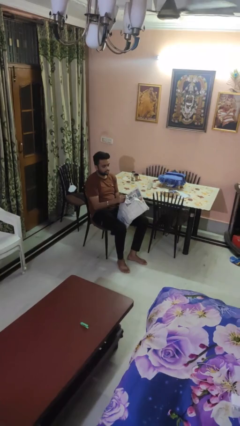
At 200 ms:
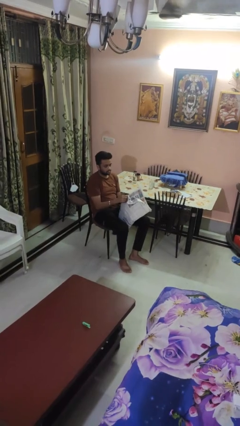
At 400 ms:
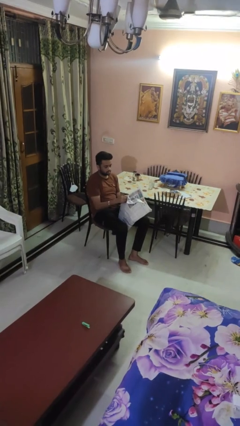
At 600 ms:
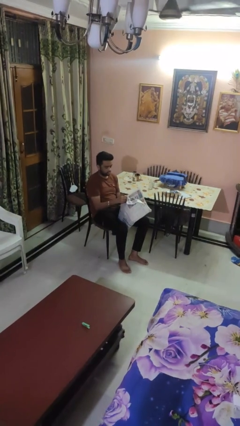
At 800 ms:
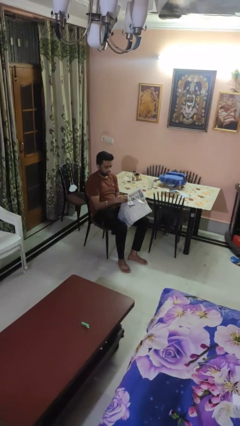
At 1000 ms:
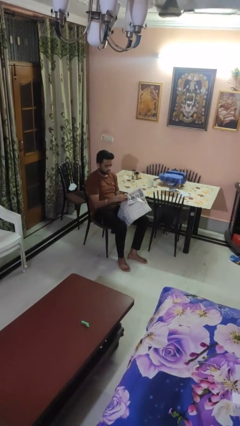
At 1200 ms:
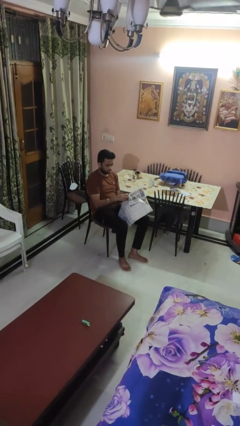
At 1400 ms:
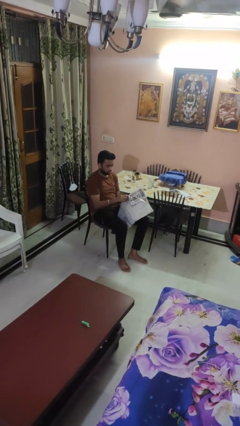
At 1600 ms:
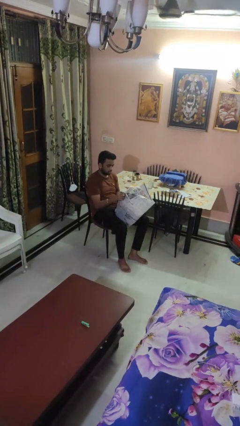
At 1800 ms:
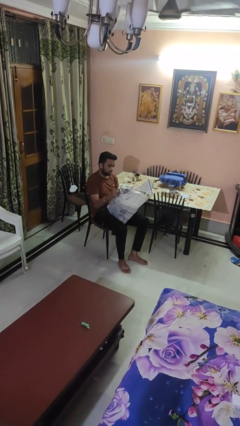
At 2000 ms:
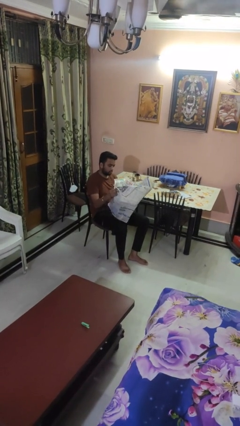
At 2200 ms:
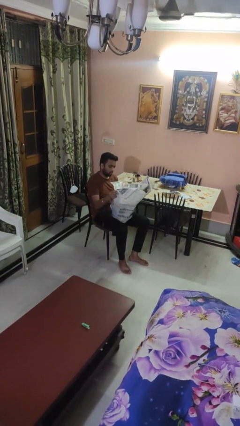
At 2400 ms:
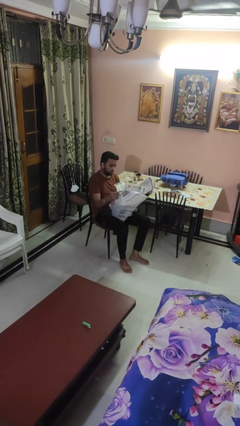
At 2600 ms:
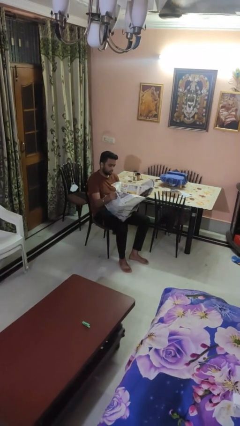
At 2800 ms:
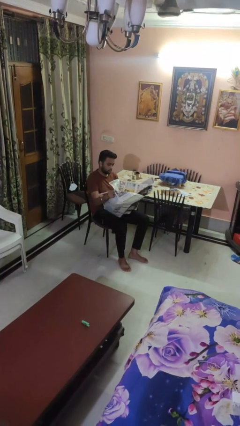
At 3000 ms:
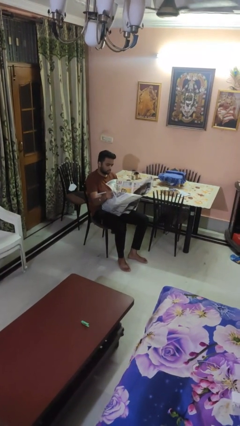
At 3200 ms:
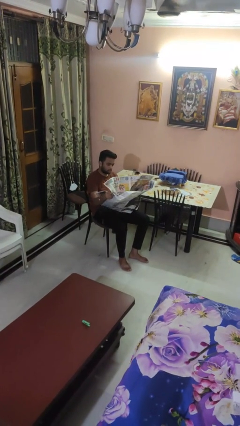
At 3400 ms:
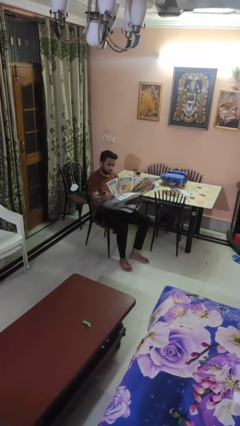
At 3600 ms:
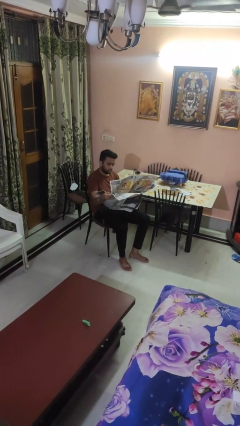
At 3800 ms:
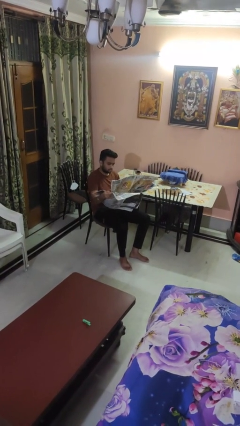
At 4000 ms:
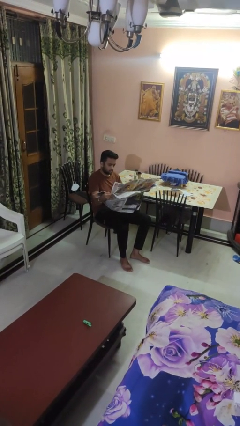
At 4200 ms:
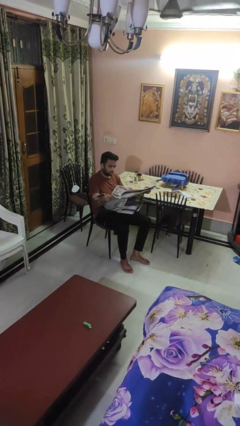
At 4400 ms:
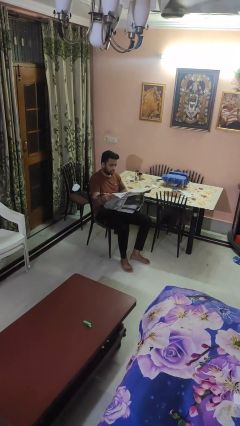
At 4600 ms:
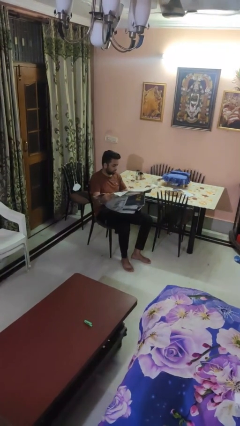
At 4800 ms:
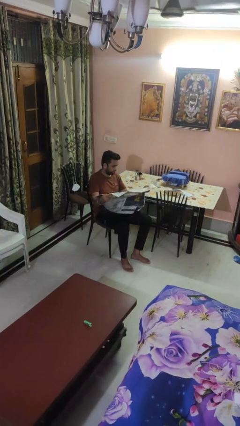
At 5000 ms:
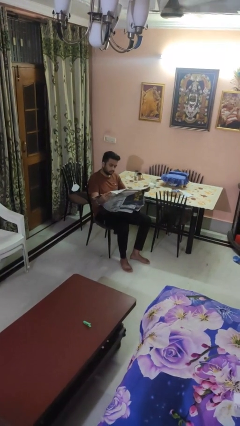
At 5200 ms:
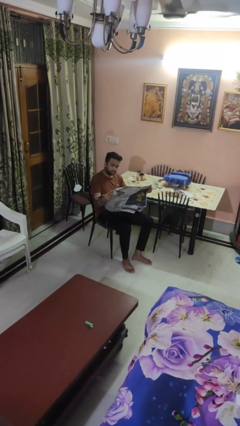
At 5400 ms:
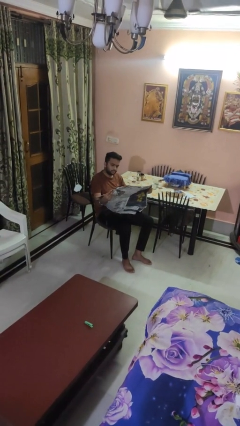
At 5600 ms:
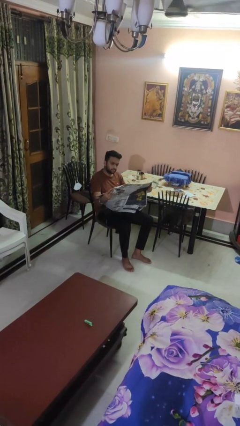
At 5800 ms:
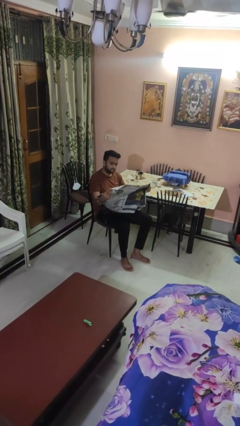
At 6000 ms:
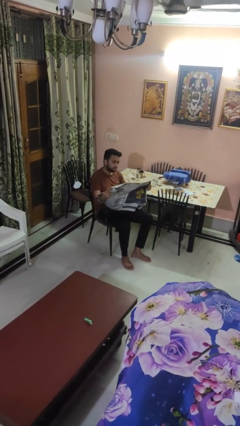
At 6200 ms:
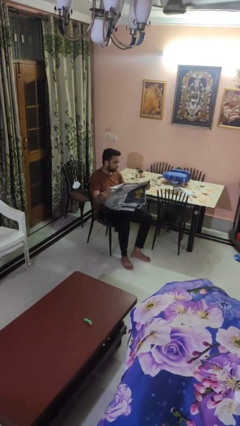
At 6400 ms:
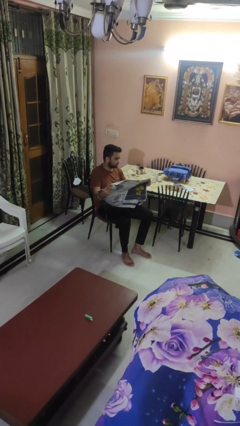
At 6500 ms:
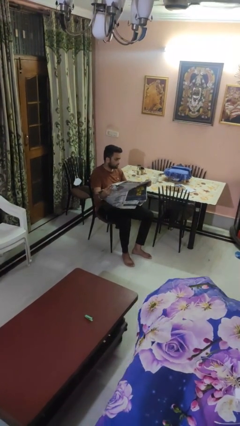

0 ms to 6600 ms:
person reads newspaper

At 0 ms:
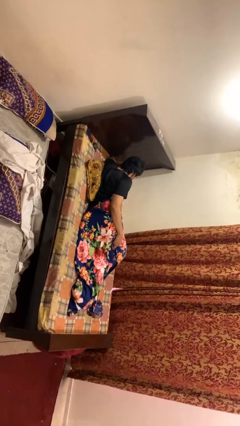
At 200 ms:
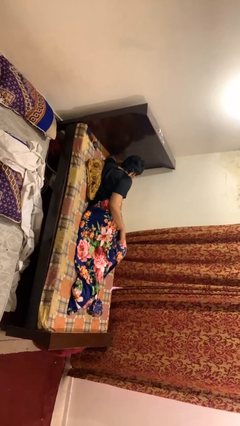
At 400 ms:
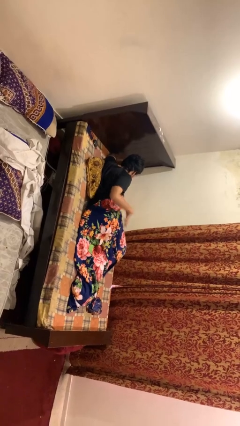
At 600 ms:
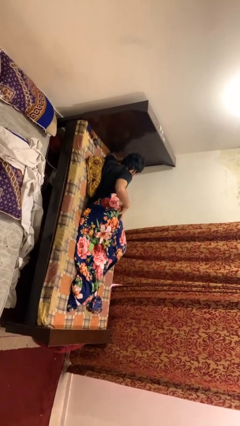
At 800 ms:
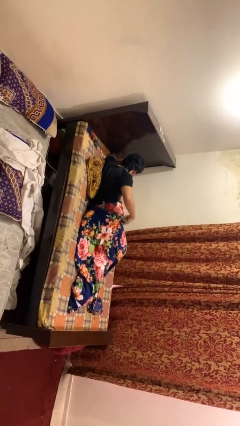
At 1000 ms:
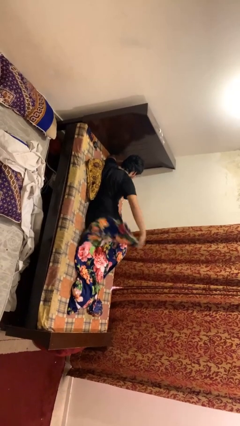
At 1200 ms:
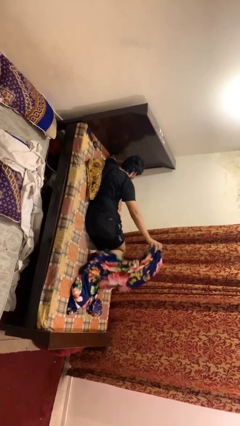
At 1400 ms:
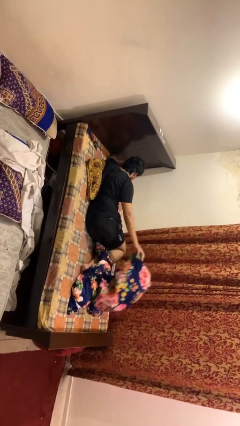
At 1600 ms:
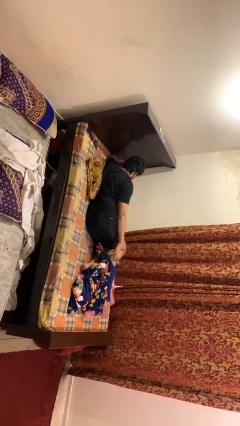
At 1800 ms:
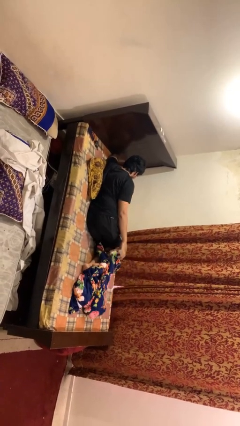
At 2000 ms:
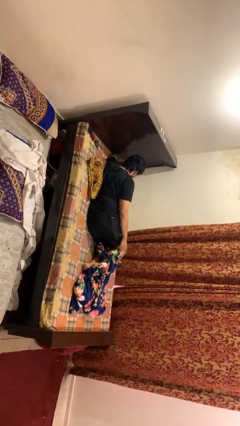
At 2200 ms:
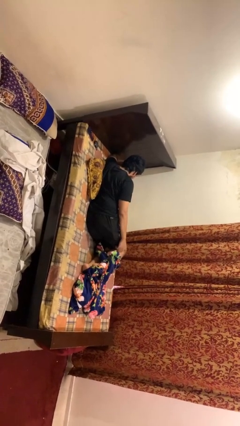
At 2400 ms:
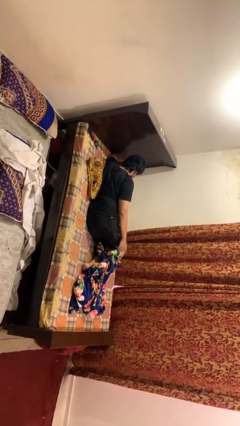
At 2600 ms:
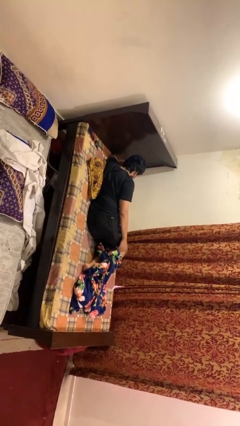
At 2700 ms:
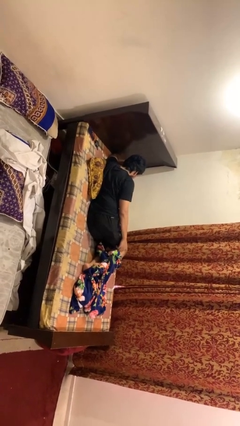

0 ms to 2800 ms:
person uncovers with blanket

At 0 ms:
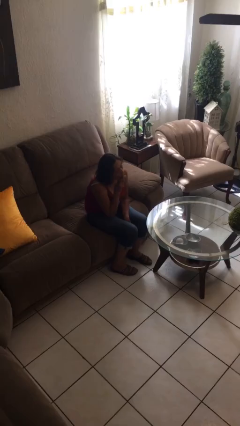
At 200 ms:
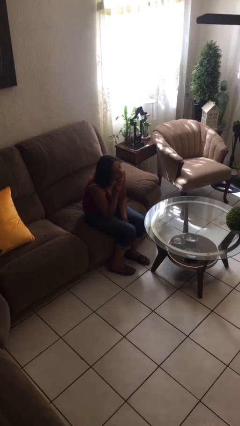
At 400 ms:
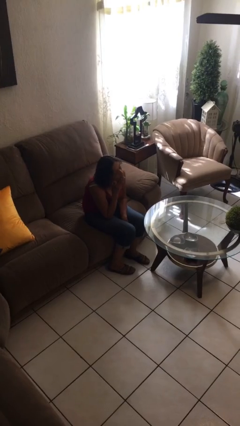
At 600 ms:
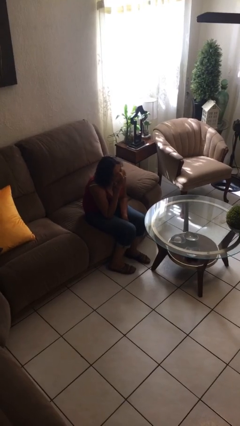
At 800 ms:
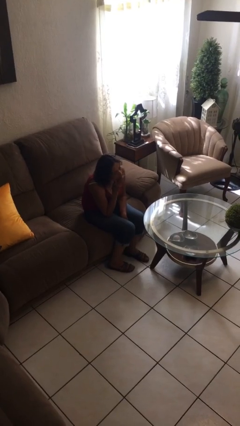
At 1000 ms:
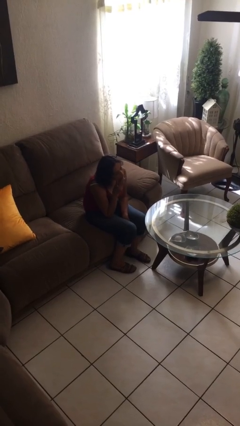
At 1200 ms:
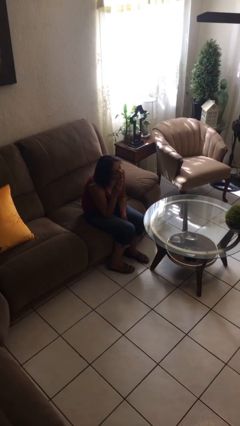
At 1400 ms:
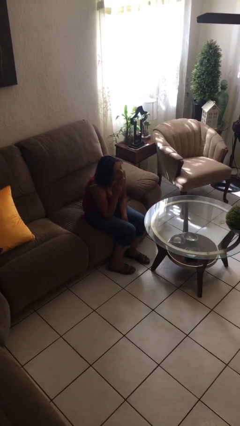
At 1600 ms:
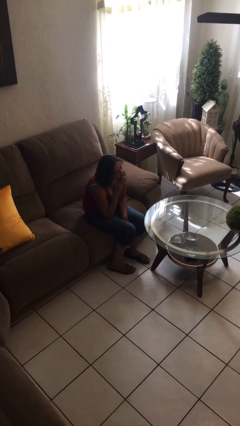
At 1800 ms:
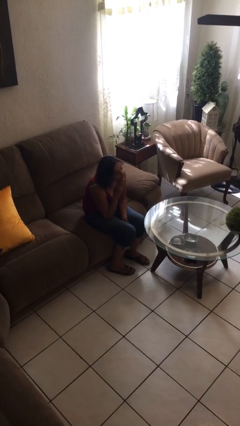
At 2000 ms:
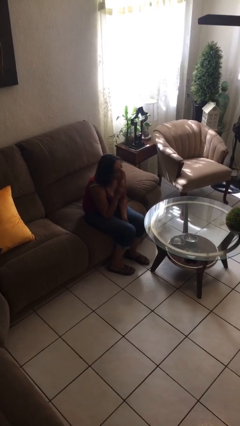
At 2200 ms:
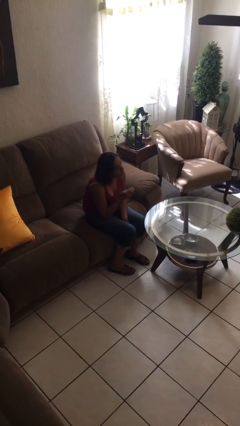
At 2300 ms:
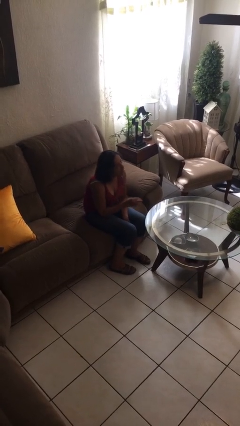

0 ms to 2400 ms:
person strokes chin

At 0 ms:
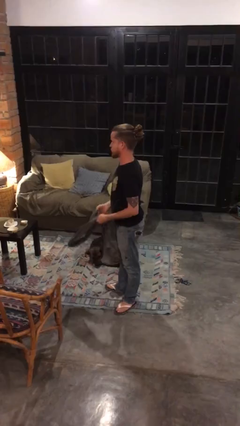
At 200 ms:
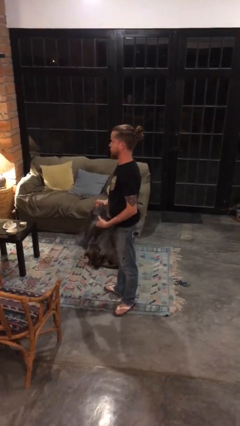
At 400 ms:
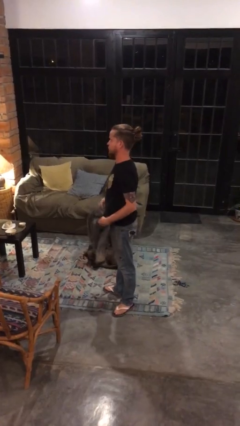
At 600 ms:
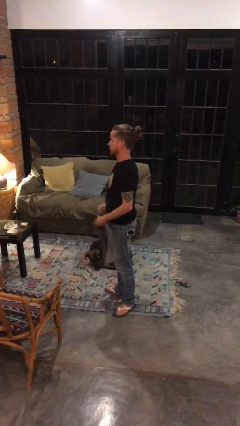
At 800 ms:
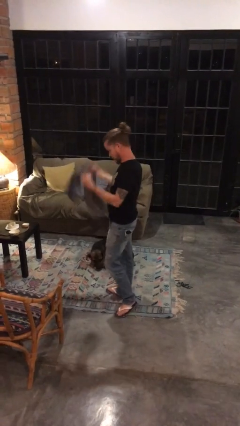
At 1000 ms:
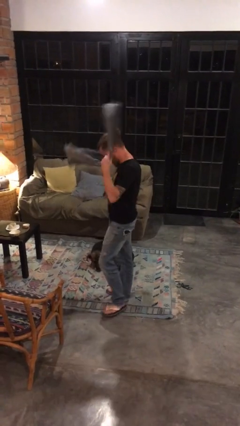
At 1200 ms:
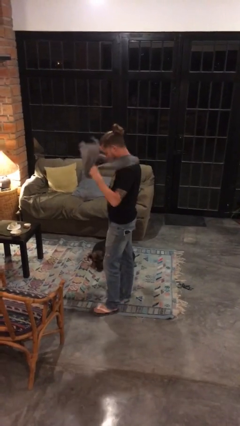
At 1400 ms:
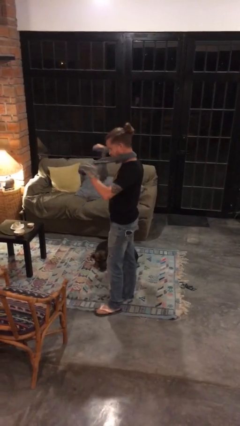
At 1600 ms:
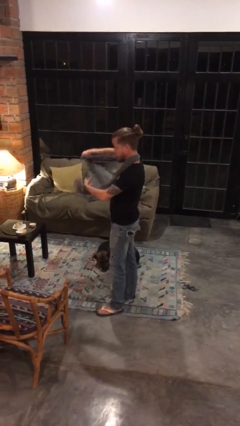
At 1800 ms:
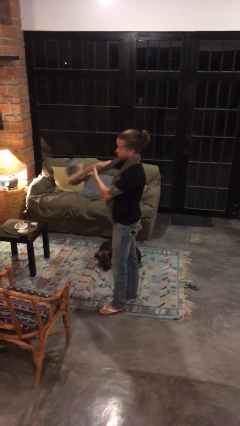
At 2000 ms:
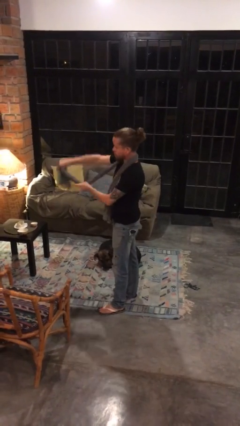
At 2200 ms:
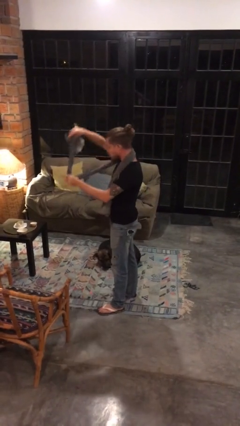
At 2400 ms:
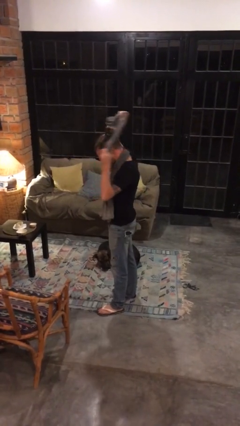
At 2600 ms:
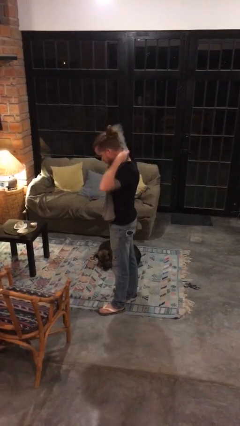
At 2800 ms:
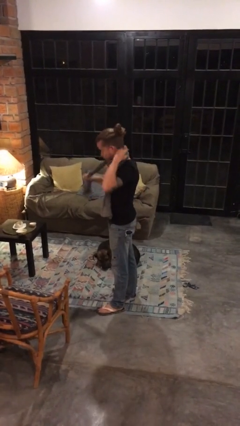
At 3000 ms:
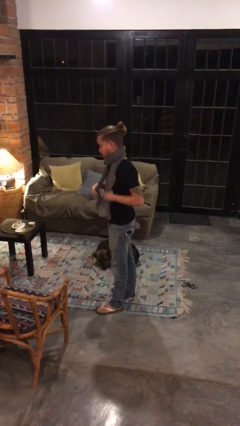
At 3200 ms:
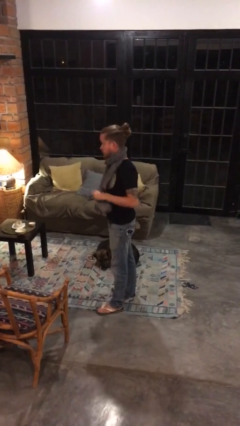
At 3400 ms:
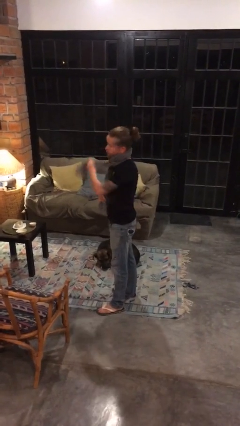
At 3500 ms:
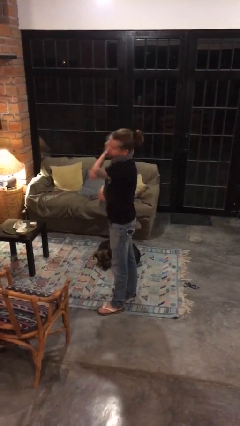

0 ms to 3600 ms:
person puts on scarf

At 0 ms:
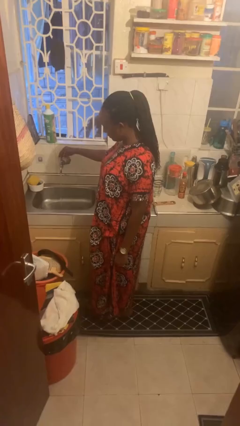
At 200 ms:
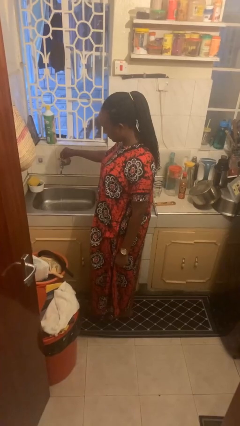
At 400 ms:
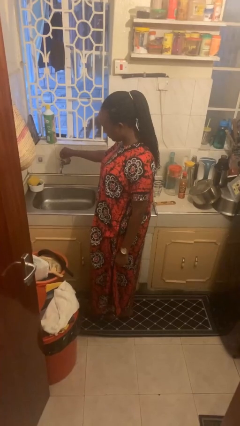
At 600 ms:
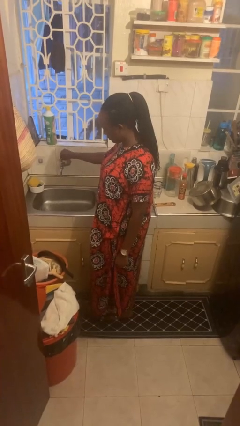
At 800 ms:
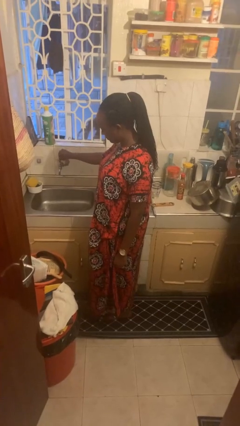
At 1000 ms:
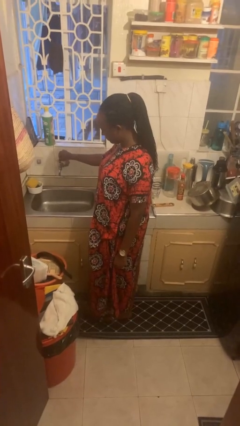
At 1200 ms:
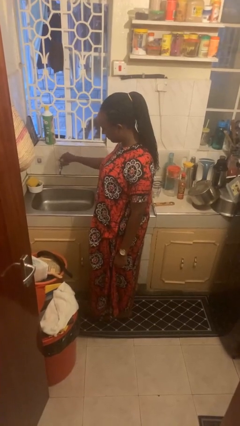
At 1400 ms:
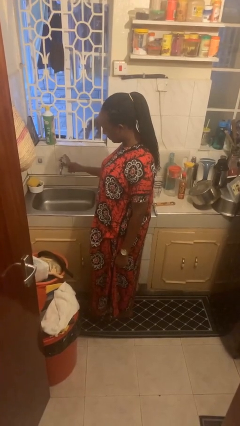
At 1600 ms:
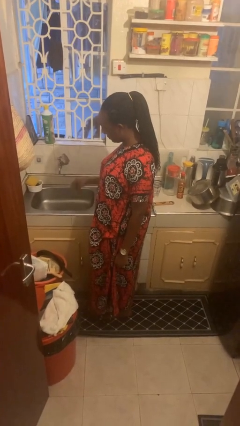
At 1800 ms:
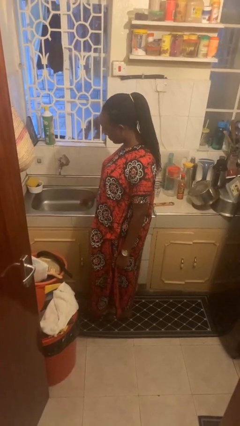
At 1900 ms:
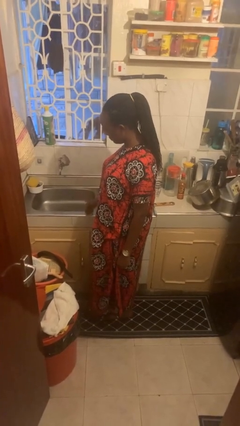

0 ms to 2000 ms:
person turns off faucet

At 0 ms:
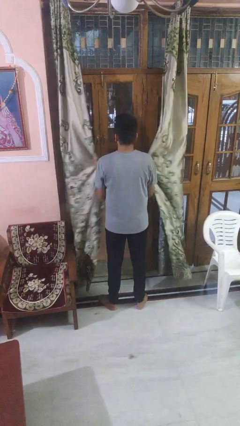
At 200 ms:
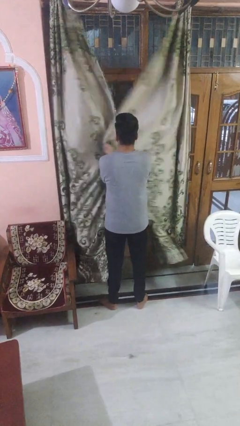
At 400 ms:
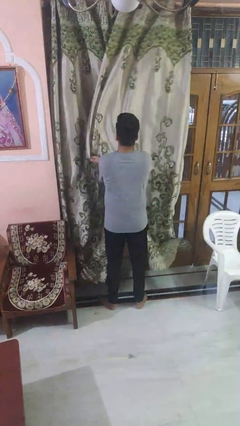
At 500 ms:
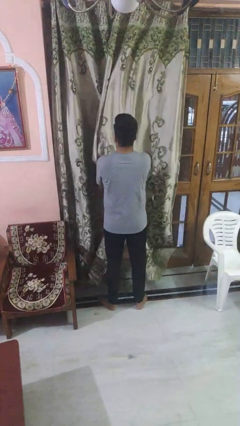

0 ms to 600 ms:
person closes curtains
